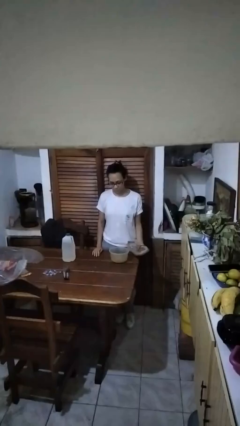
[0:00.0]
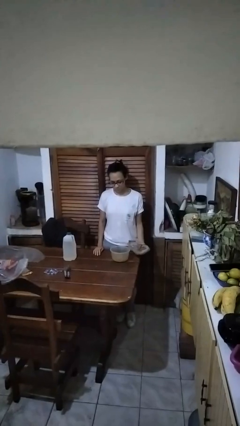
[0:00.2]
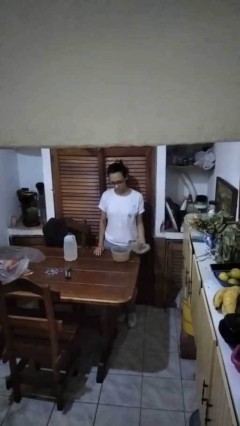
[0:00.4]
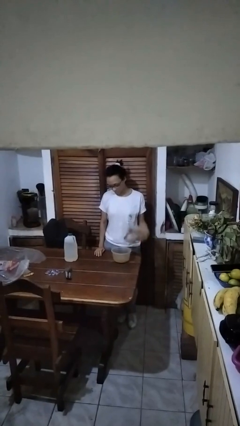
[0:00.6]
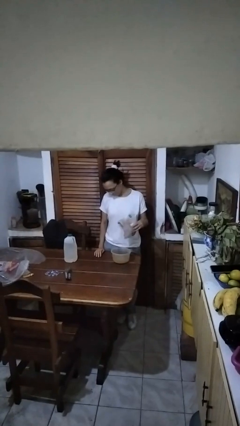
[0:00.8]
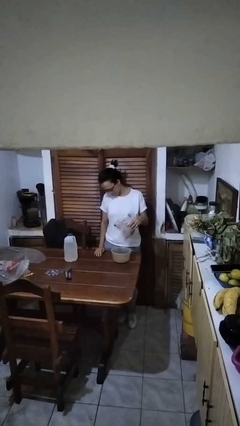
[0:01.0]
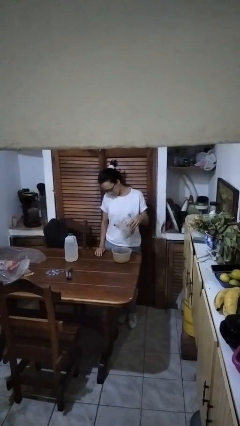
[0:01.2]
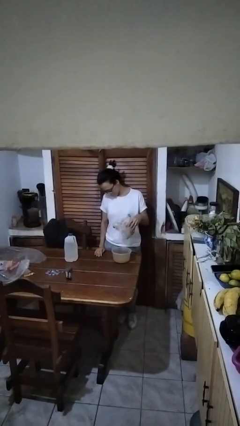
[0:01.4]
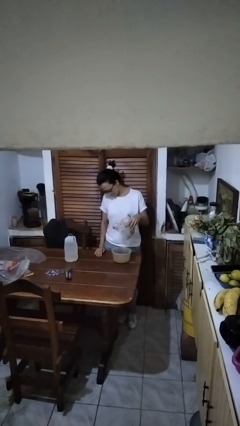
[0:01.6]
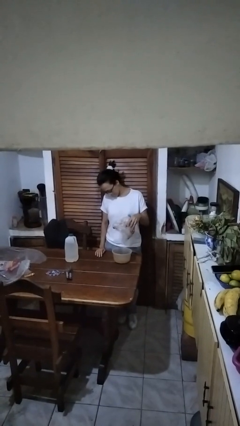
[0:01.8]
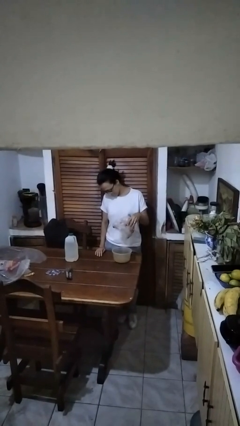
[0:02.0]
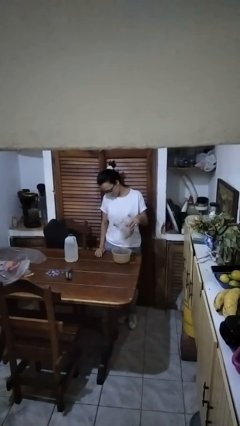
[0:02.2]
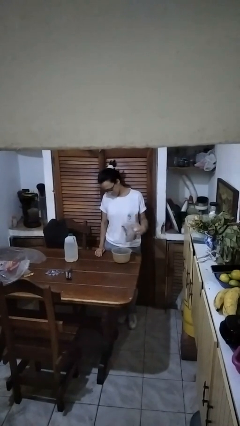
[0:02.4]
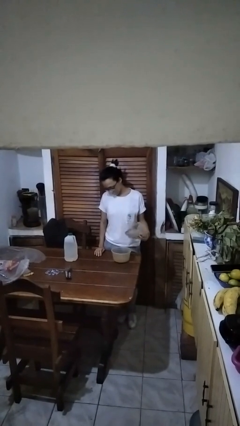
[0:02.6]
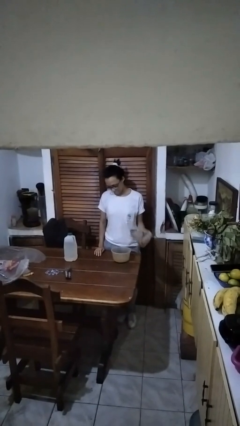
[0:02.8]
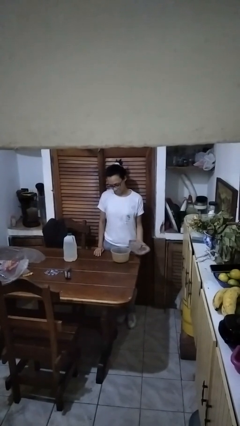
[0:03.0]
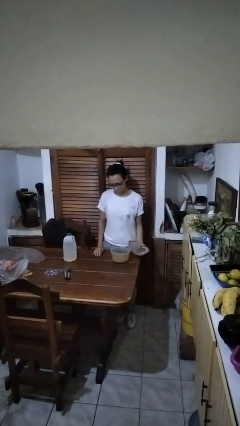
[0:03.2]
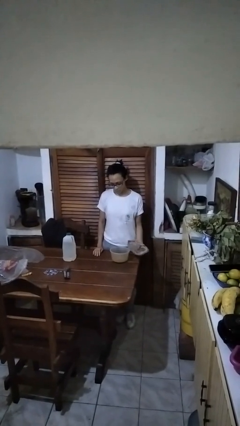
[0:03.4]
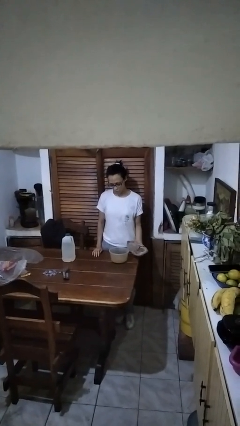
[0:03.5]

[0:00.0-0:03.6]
person pours into bowl

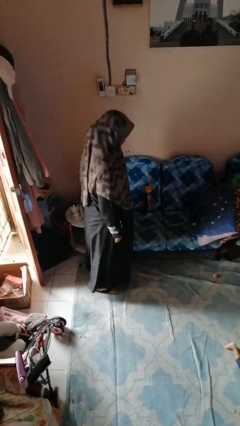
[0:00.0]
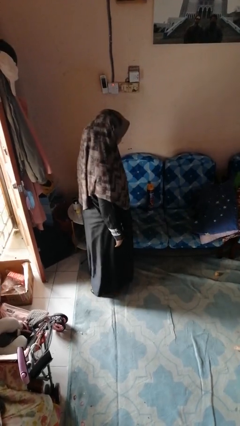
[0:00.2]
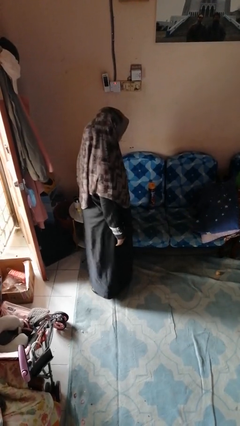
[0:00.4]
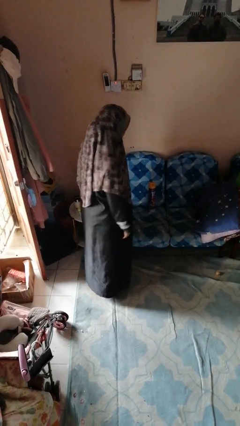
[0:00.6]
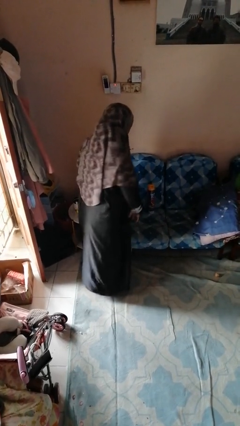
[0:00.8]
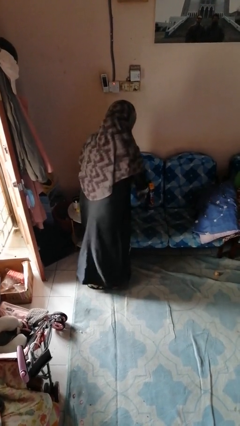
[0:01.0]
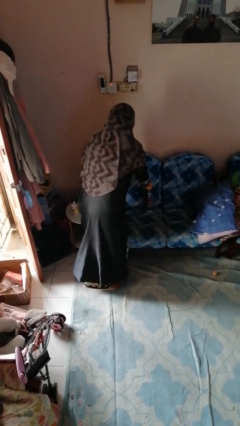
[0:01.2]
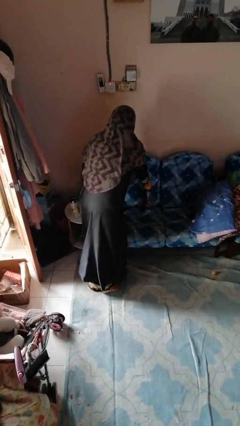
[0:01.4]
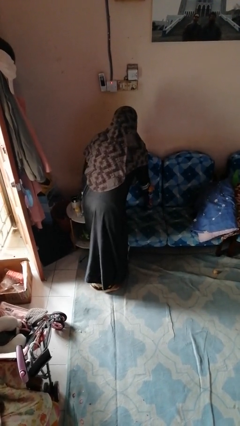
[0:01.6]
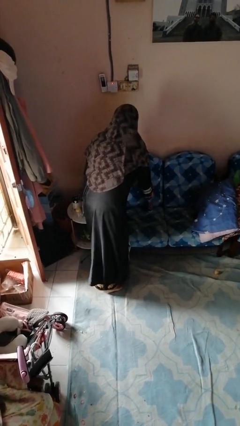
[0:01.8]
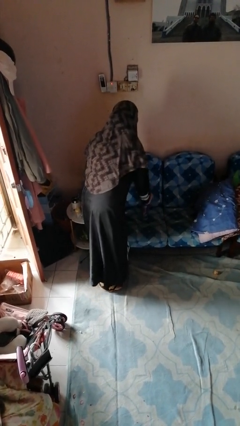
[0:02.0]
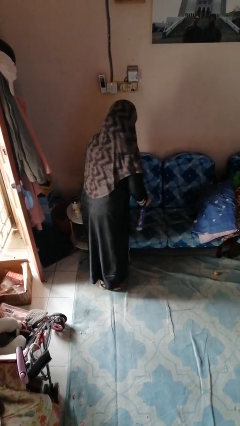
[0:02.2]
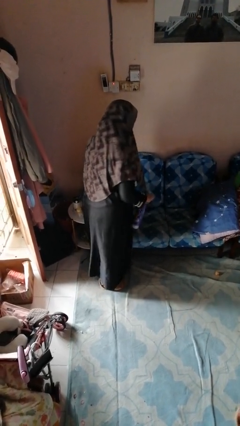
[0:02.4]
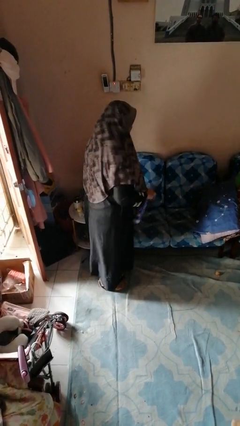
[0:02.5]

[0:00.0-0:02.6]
person picks up object from couch

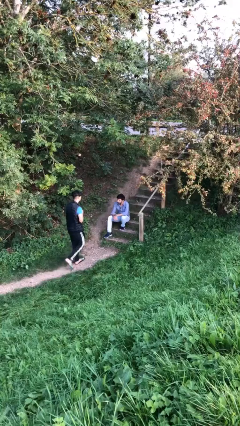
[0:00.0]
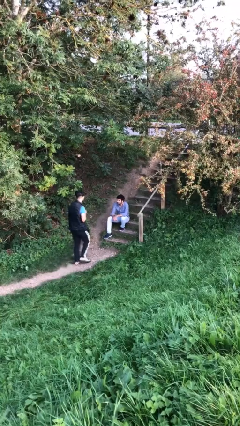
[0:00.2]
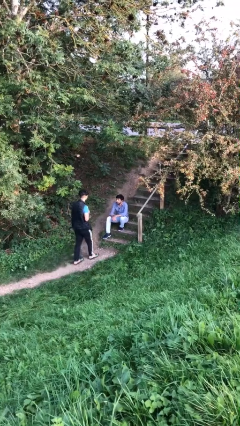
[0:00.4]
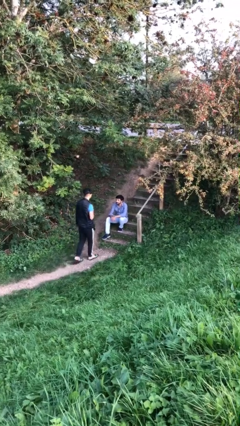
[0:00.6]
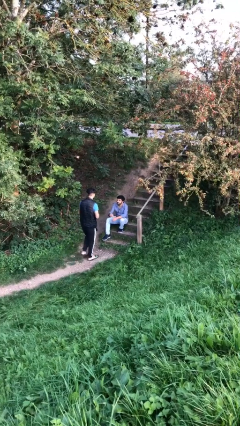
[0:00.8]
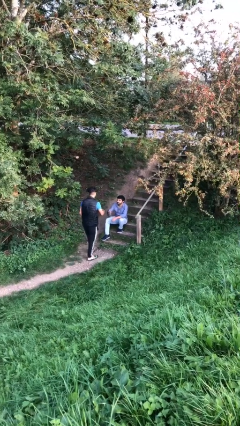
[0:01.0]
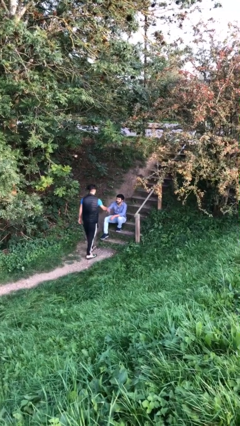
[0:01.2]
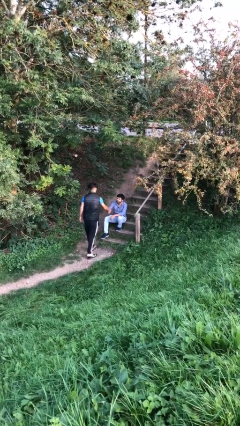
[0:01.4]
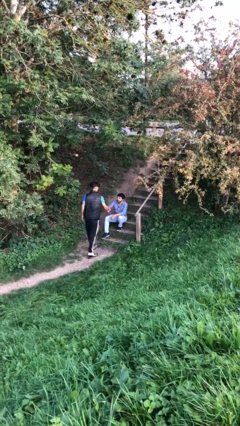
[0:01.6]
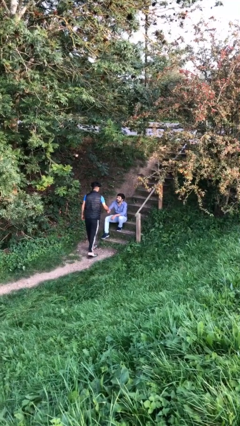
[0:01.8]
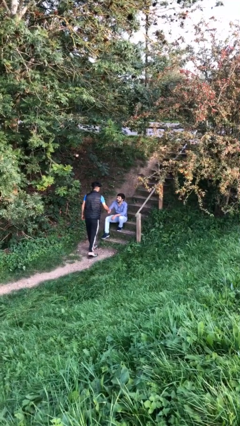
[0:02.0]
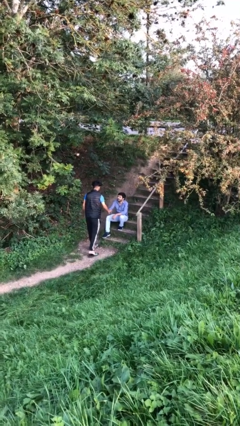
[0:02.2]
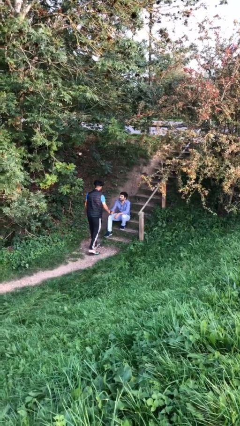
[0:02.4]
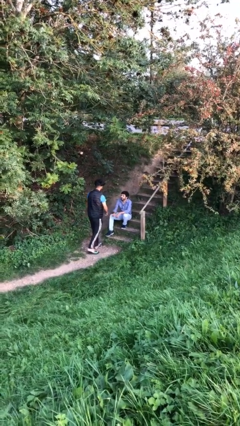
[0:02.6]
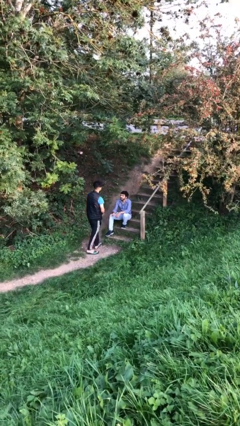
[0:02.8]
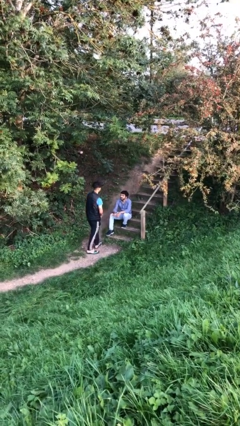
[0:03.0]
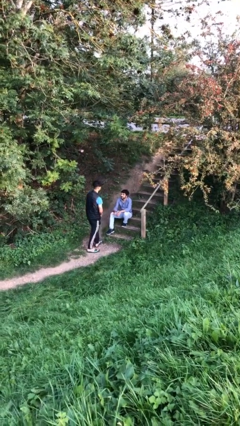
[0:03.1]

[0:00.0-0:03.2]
person shakes hand

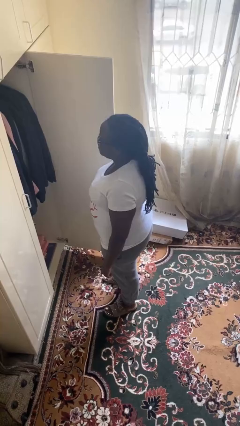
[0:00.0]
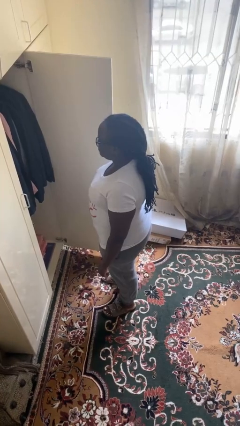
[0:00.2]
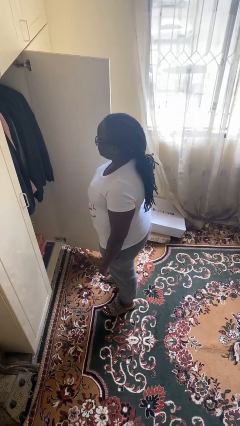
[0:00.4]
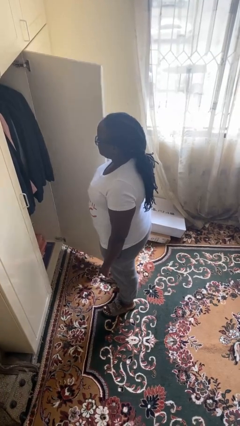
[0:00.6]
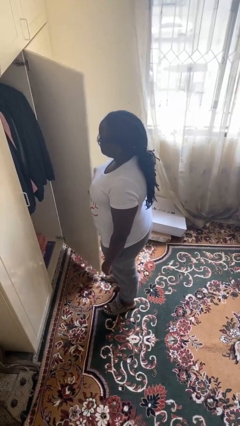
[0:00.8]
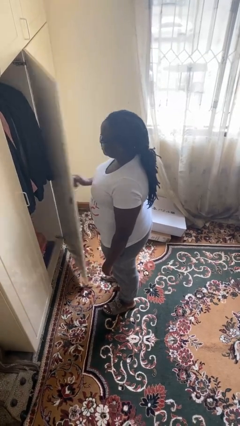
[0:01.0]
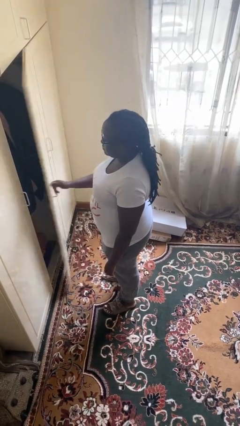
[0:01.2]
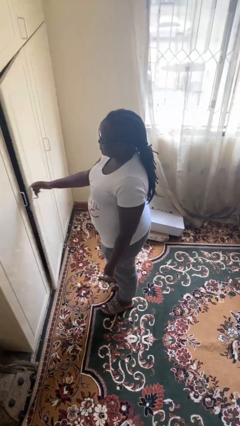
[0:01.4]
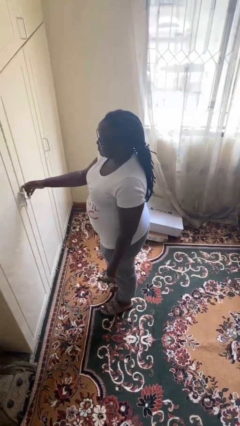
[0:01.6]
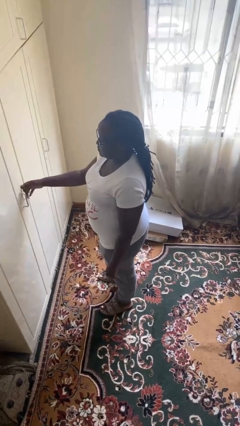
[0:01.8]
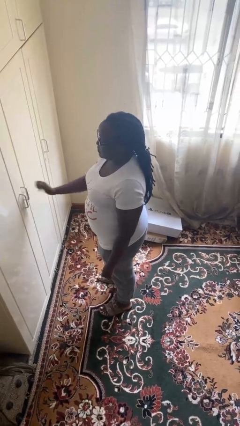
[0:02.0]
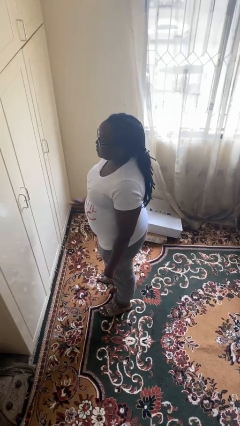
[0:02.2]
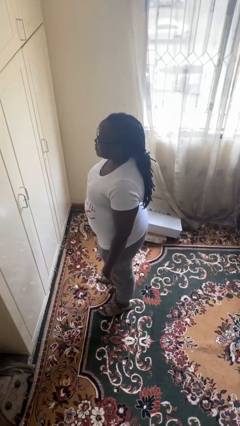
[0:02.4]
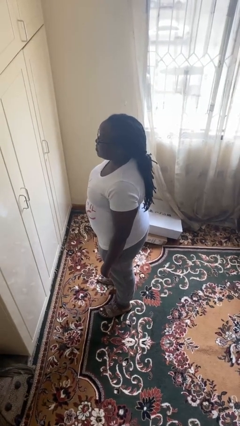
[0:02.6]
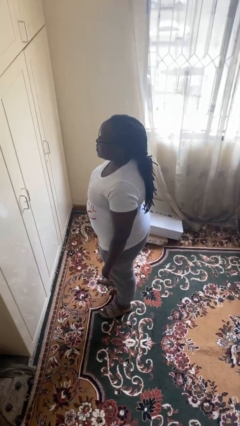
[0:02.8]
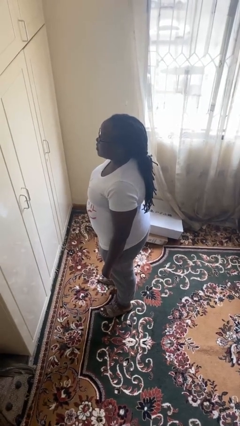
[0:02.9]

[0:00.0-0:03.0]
person closes closet door

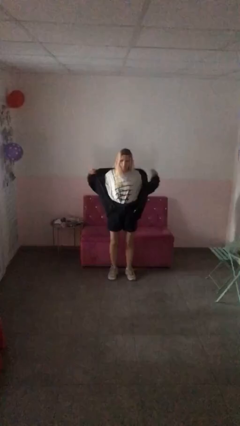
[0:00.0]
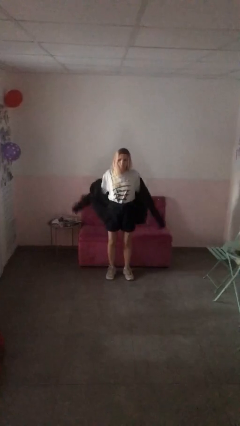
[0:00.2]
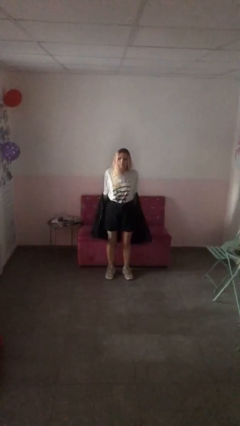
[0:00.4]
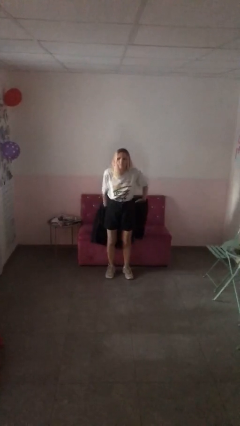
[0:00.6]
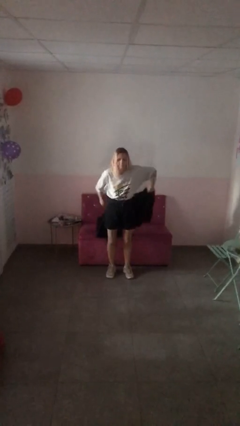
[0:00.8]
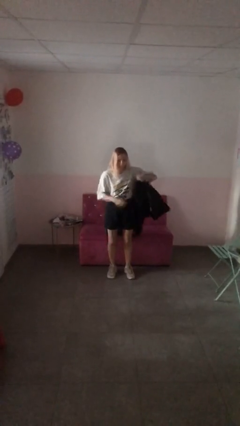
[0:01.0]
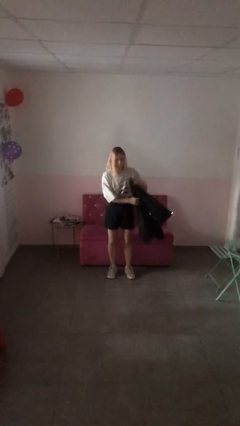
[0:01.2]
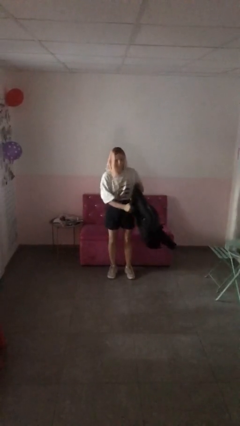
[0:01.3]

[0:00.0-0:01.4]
person takes off jacket

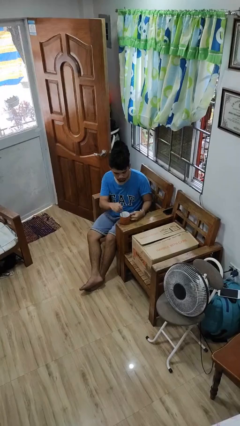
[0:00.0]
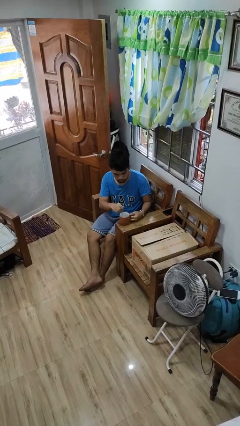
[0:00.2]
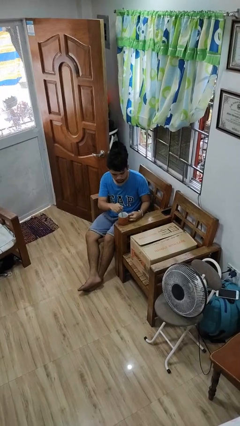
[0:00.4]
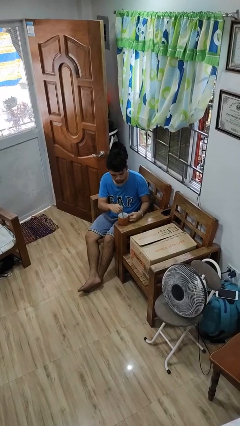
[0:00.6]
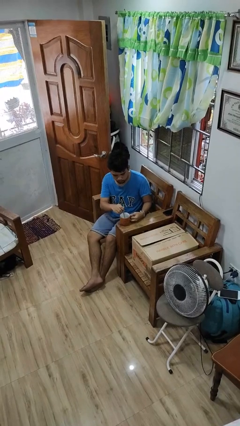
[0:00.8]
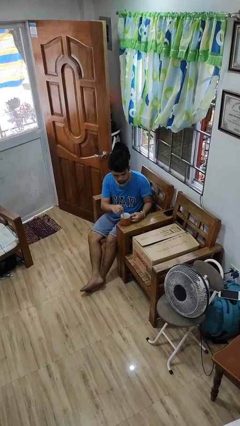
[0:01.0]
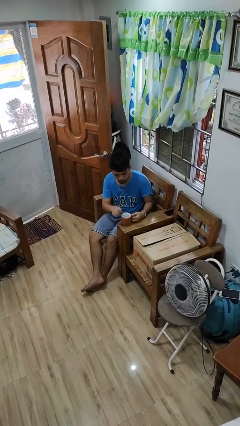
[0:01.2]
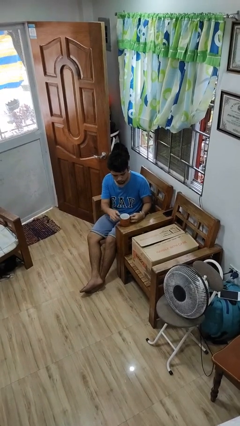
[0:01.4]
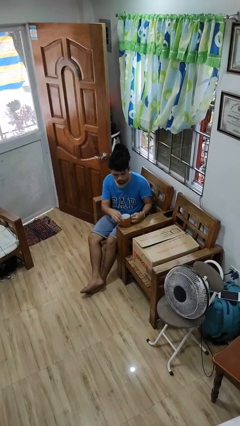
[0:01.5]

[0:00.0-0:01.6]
person stirs mug

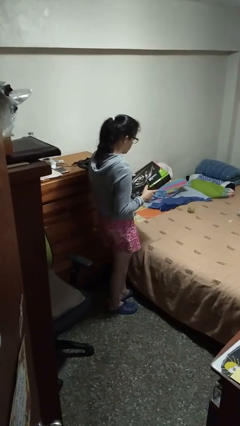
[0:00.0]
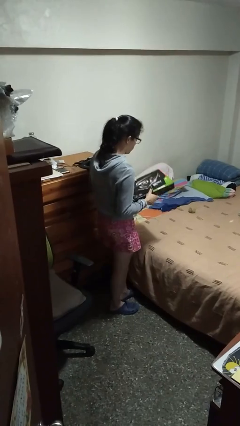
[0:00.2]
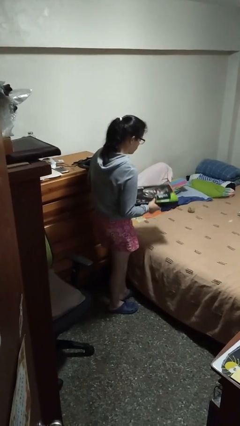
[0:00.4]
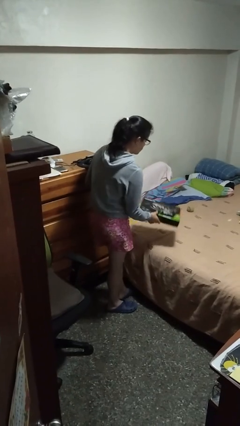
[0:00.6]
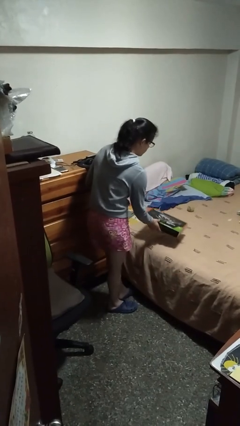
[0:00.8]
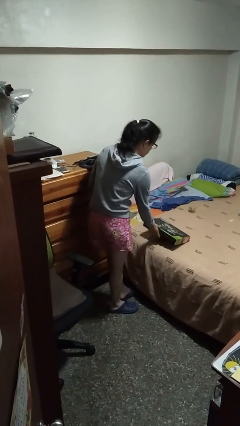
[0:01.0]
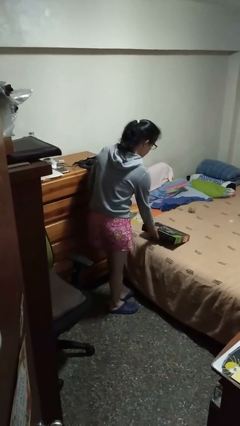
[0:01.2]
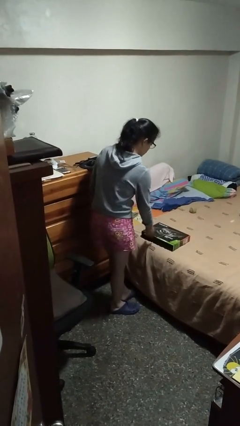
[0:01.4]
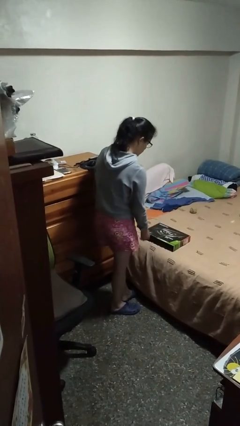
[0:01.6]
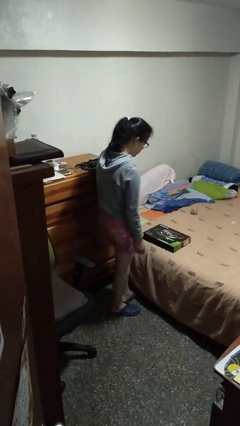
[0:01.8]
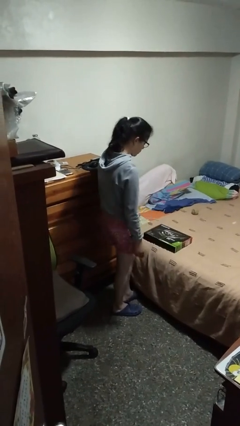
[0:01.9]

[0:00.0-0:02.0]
person puts down object on bed
